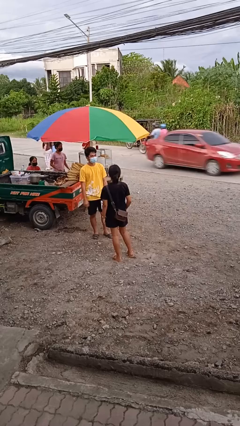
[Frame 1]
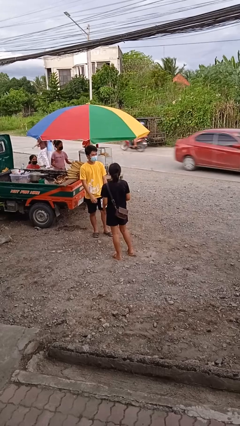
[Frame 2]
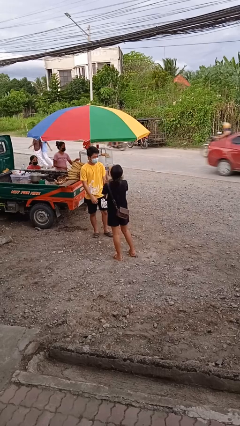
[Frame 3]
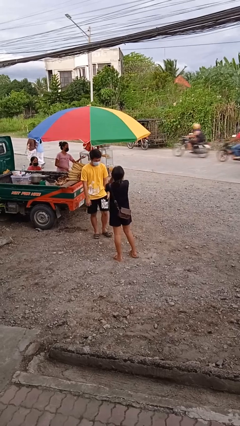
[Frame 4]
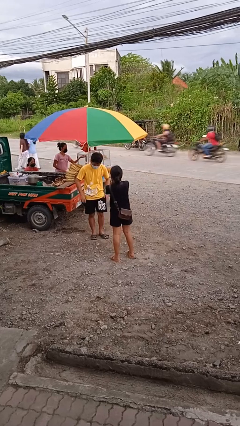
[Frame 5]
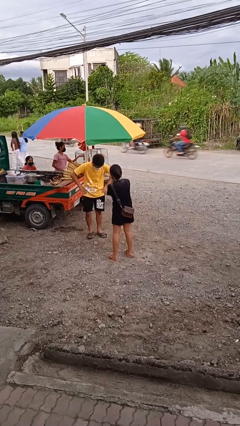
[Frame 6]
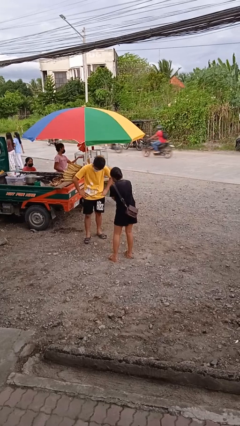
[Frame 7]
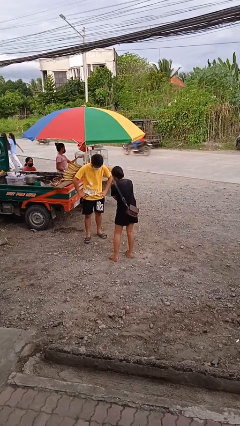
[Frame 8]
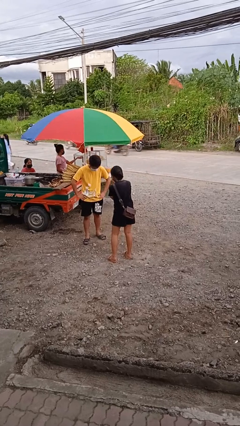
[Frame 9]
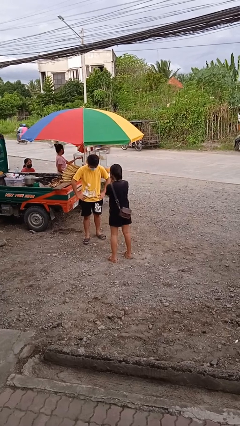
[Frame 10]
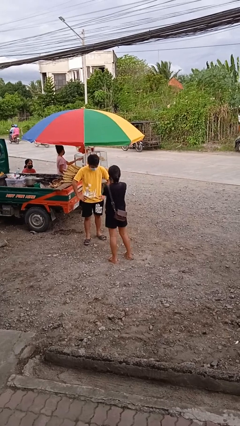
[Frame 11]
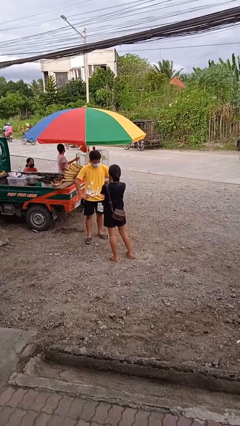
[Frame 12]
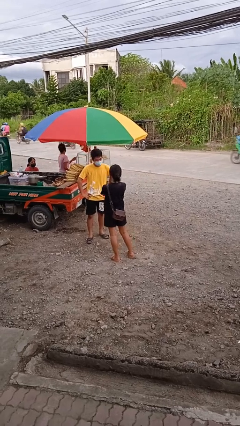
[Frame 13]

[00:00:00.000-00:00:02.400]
person laughs with person

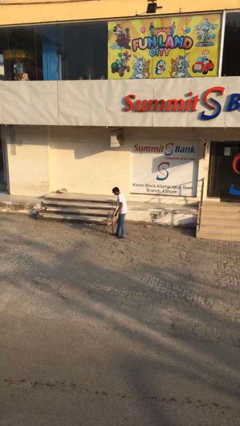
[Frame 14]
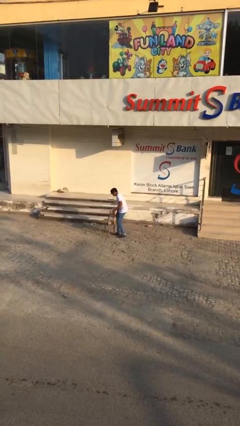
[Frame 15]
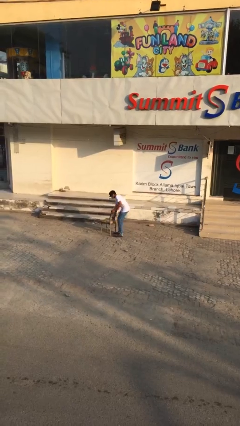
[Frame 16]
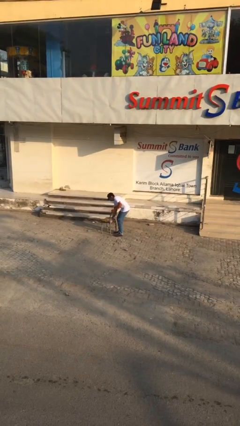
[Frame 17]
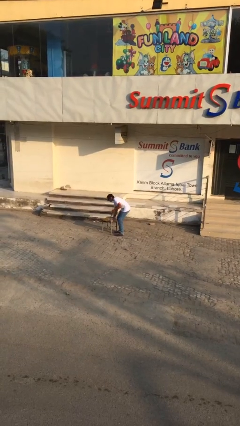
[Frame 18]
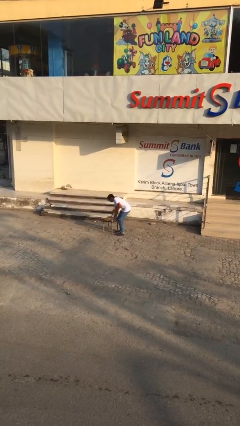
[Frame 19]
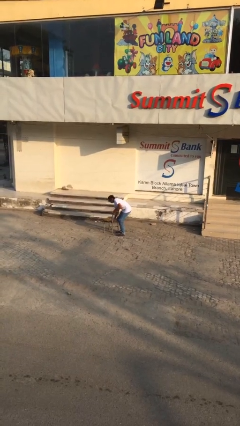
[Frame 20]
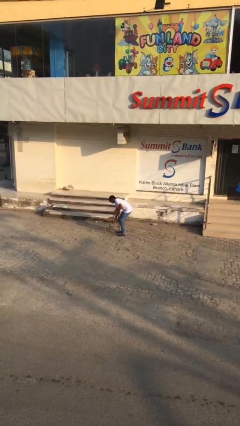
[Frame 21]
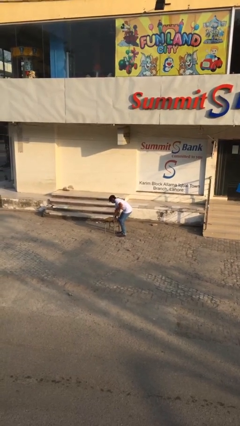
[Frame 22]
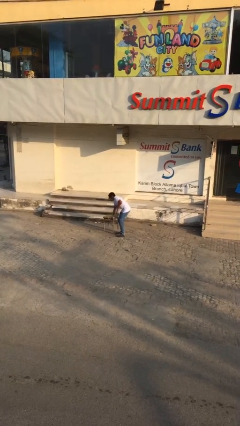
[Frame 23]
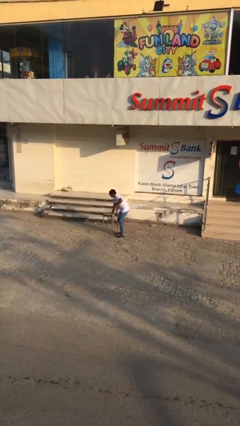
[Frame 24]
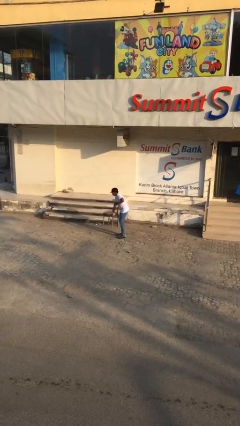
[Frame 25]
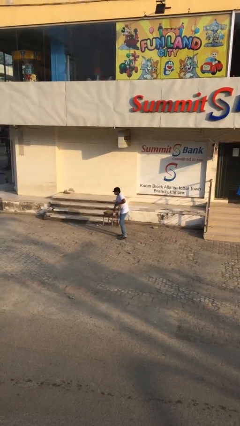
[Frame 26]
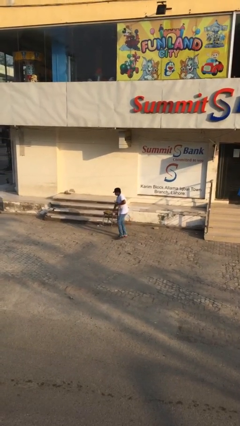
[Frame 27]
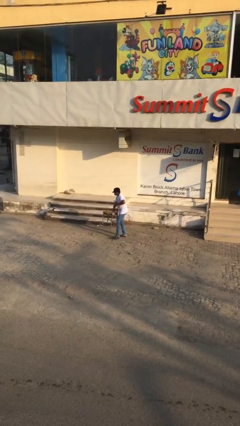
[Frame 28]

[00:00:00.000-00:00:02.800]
person picks up object from floor

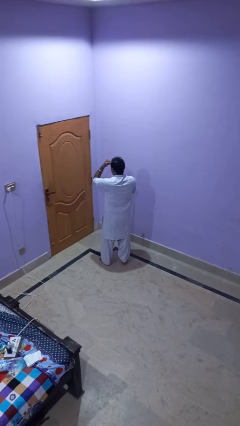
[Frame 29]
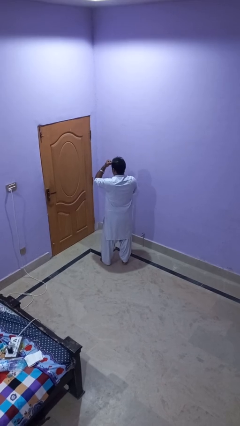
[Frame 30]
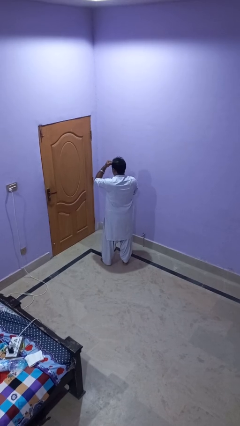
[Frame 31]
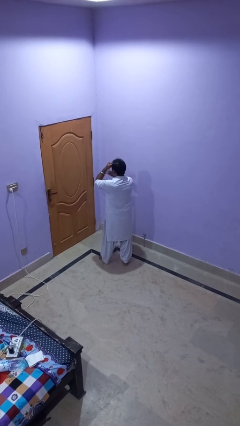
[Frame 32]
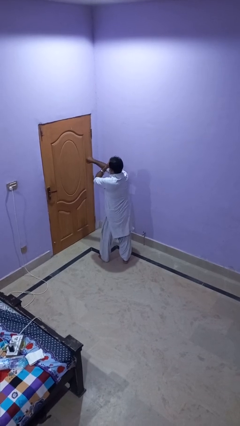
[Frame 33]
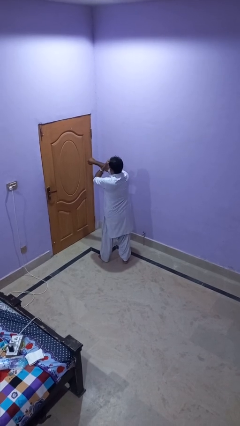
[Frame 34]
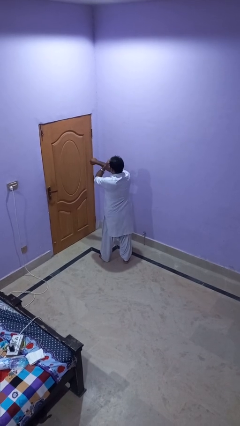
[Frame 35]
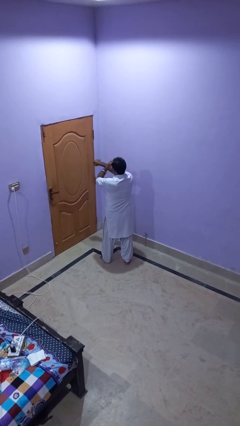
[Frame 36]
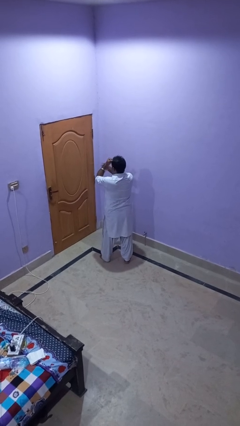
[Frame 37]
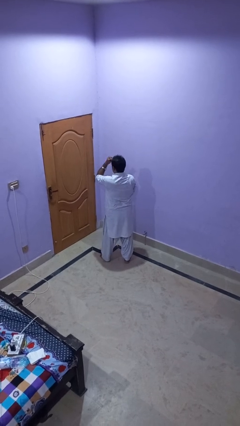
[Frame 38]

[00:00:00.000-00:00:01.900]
person punches

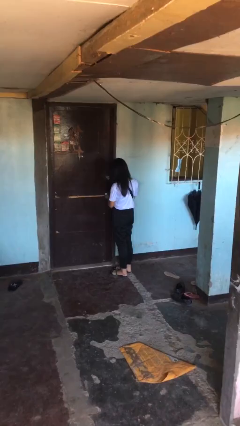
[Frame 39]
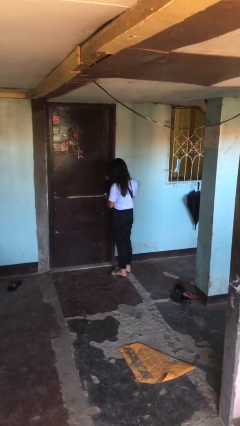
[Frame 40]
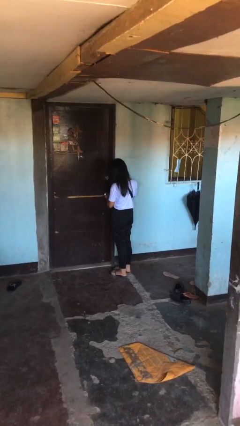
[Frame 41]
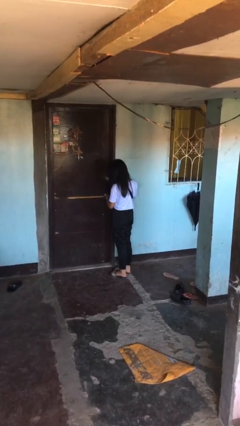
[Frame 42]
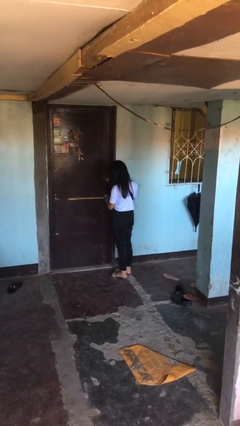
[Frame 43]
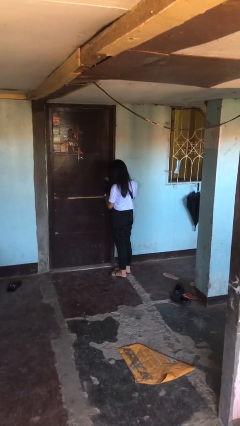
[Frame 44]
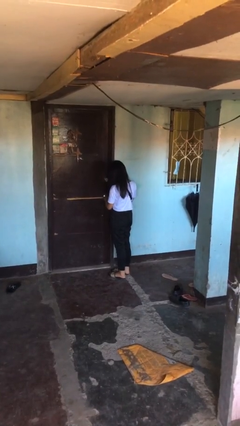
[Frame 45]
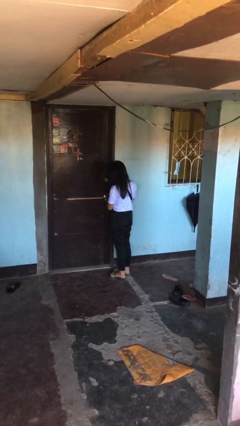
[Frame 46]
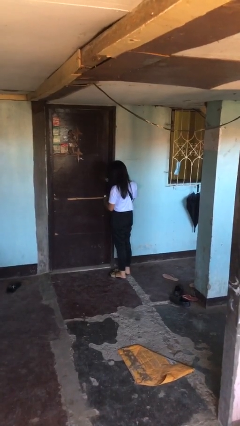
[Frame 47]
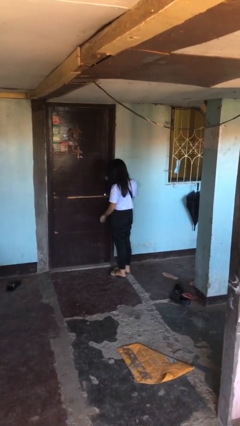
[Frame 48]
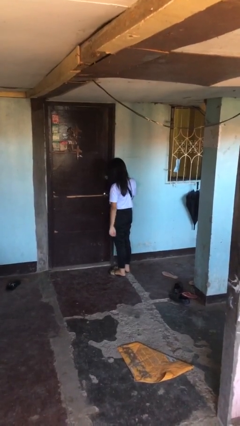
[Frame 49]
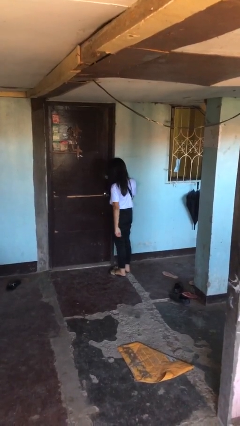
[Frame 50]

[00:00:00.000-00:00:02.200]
person locks door with keys

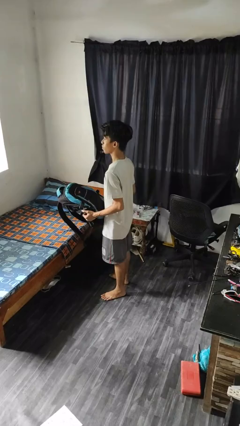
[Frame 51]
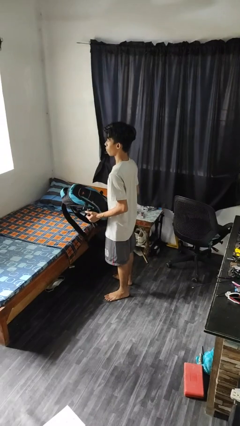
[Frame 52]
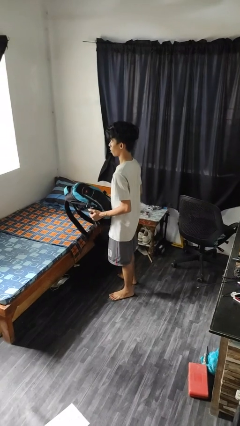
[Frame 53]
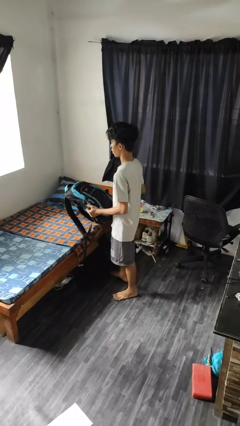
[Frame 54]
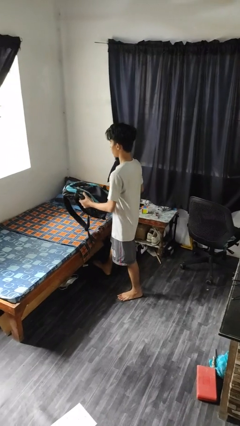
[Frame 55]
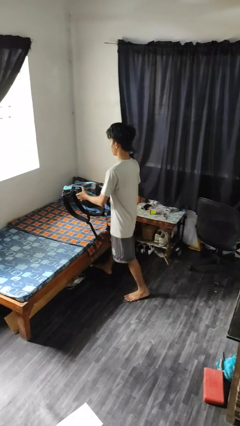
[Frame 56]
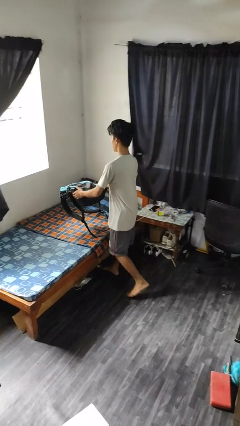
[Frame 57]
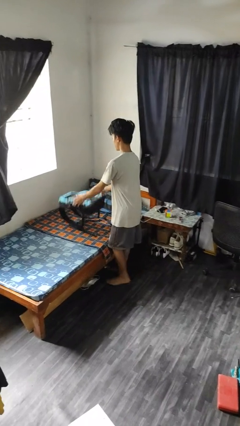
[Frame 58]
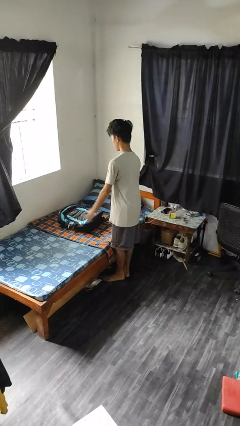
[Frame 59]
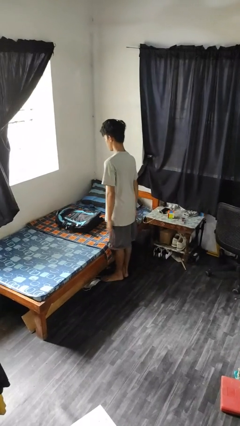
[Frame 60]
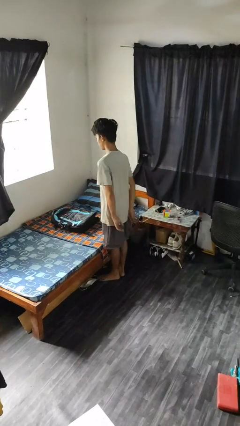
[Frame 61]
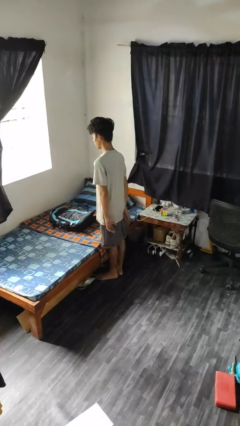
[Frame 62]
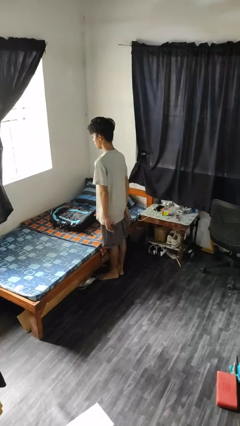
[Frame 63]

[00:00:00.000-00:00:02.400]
person puts down object on bed

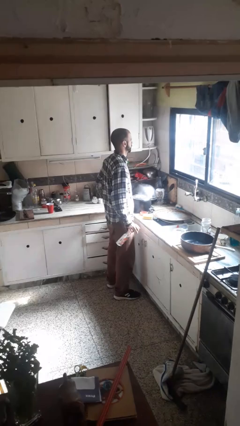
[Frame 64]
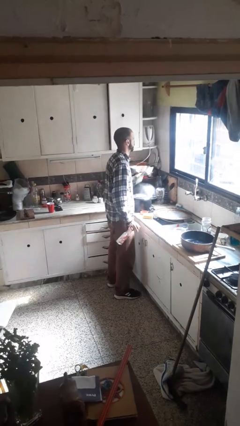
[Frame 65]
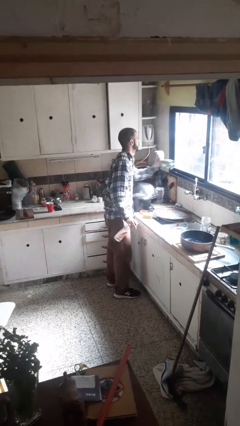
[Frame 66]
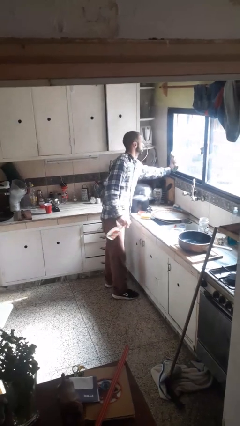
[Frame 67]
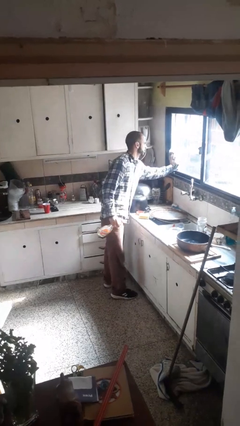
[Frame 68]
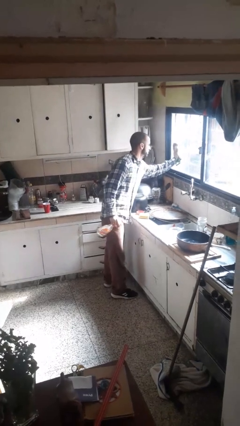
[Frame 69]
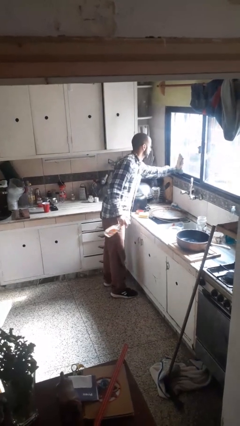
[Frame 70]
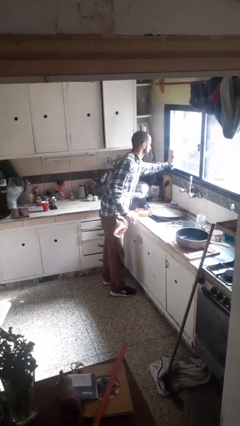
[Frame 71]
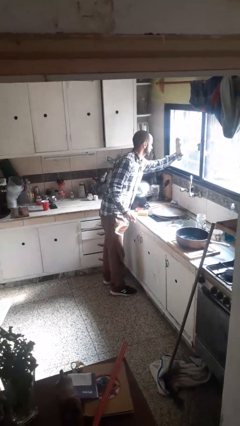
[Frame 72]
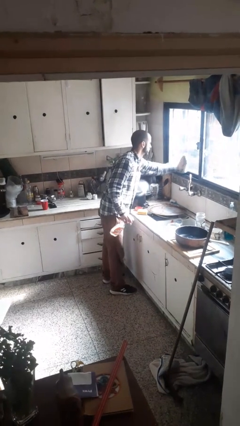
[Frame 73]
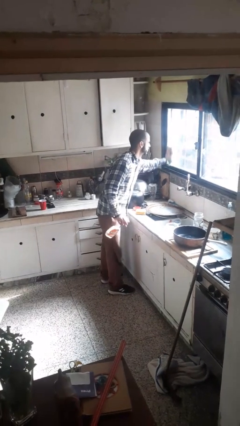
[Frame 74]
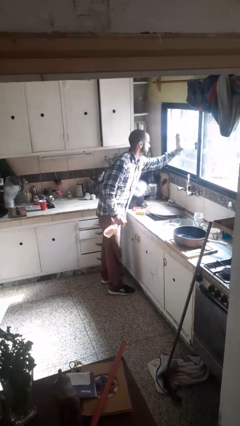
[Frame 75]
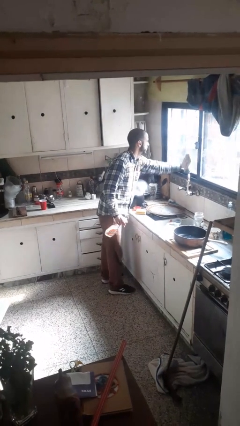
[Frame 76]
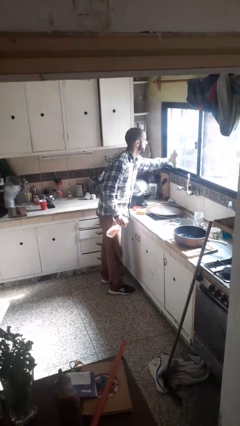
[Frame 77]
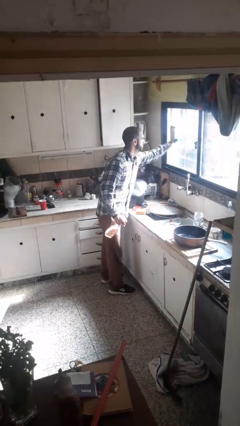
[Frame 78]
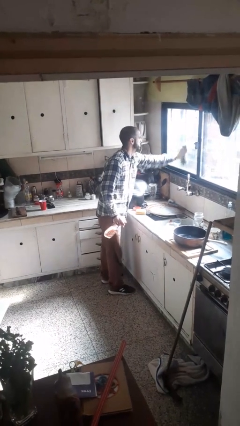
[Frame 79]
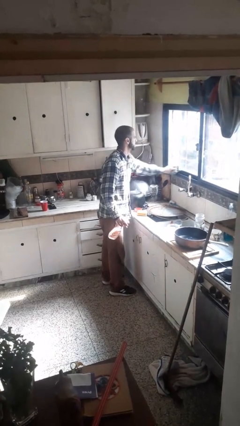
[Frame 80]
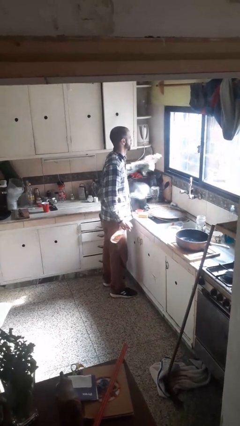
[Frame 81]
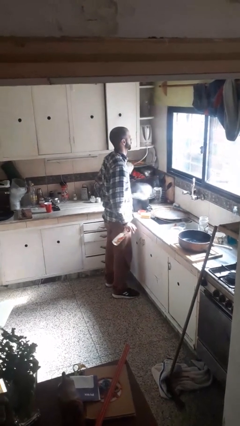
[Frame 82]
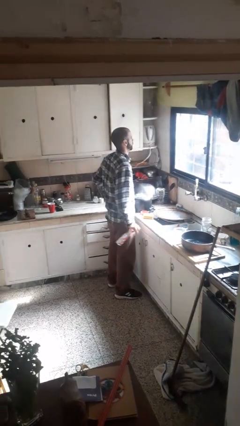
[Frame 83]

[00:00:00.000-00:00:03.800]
person washes window

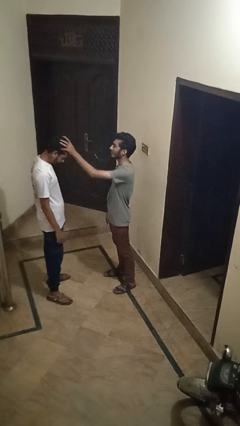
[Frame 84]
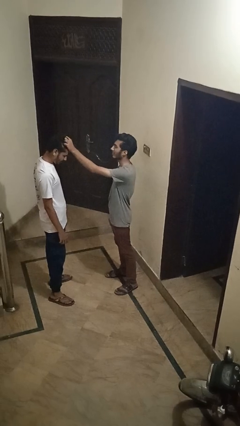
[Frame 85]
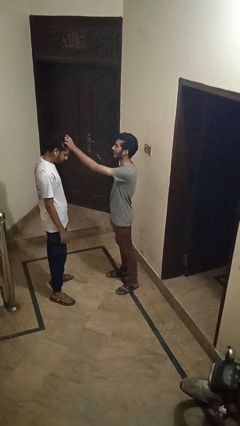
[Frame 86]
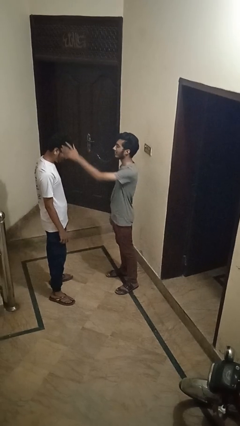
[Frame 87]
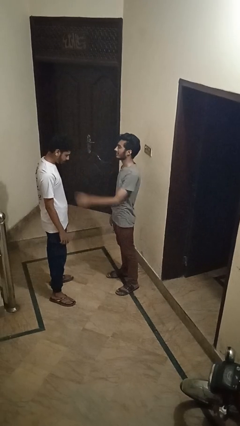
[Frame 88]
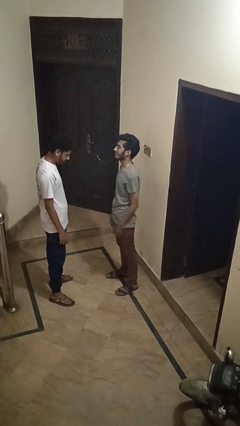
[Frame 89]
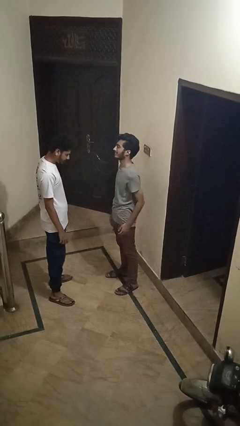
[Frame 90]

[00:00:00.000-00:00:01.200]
person grabs person by hair

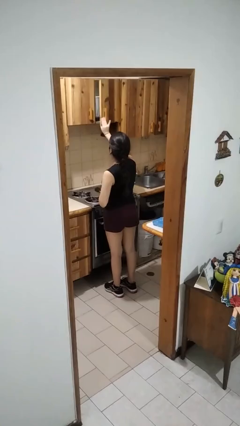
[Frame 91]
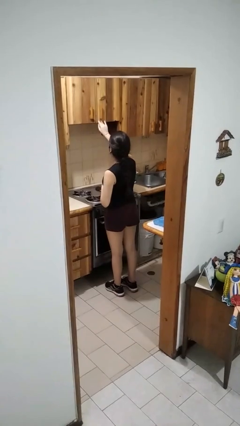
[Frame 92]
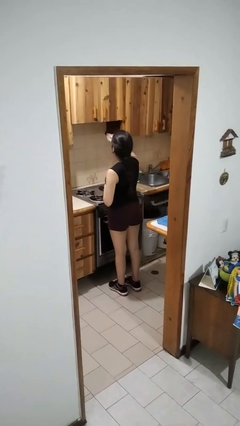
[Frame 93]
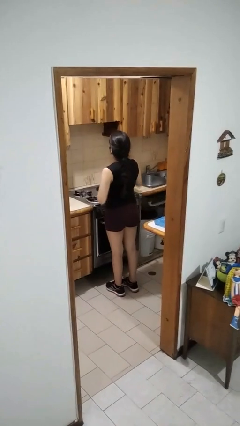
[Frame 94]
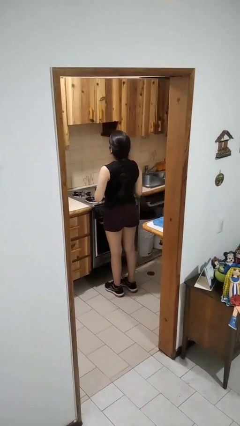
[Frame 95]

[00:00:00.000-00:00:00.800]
person closes cabinet
